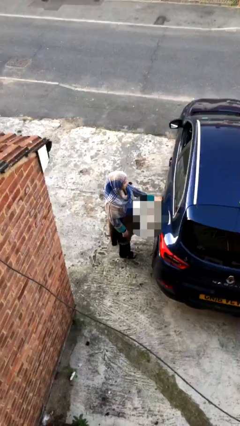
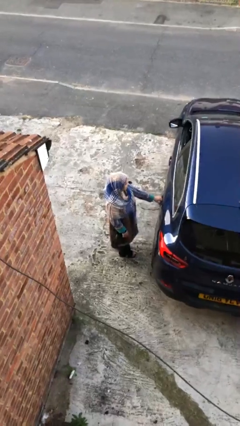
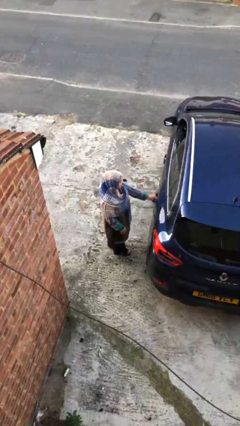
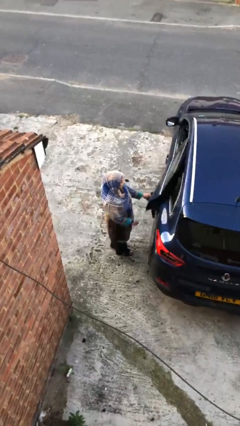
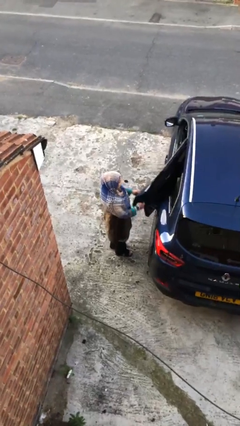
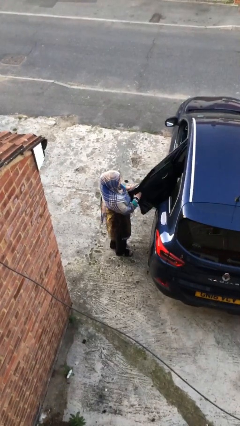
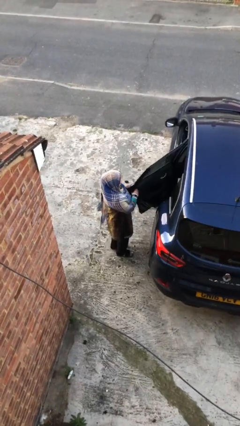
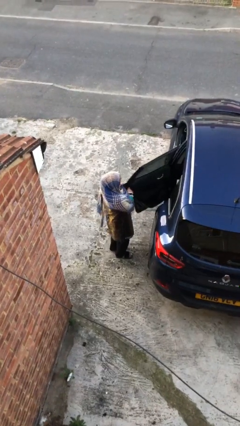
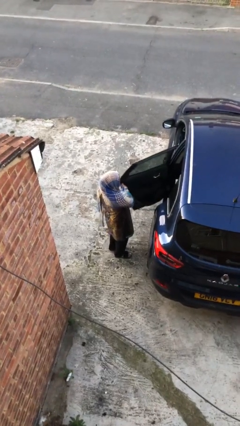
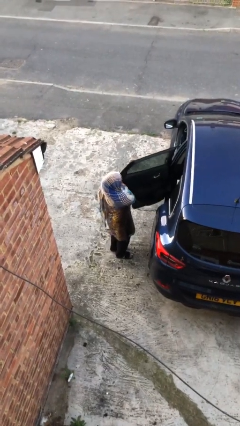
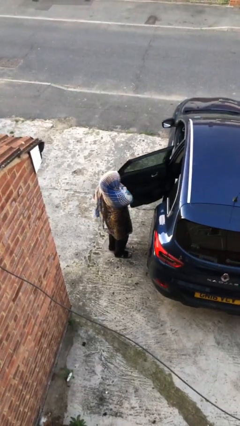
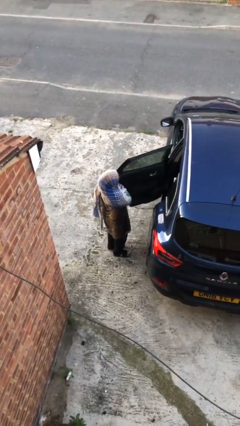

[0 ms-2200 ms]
person opens car door

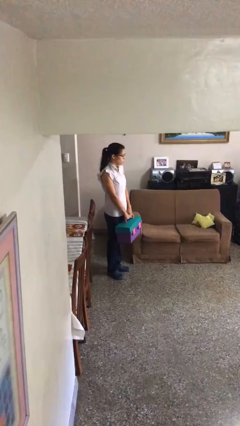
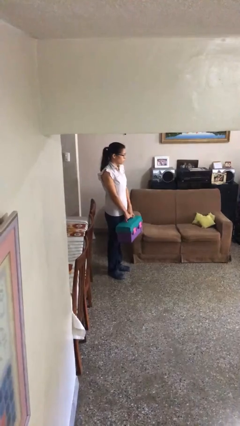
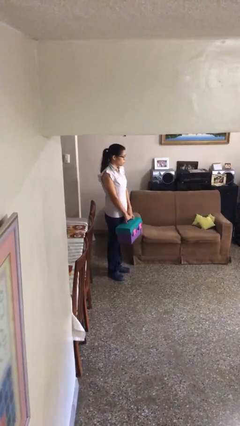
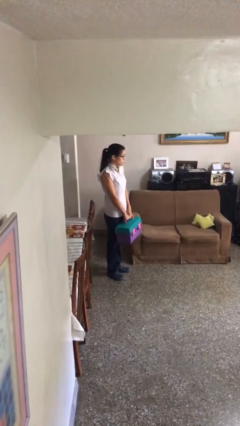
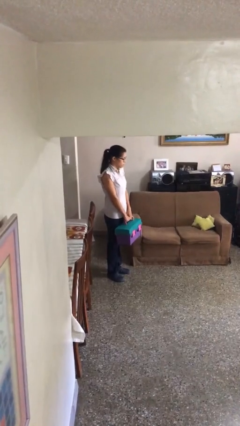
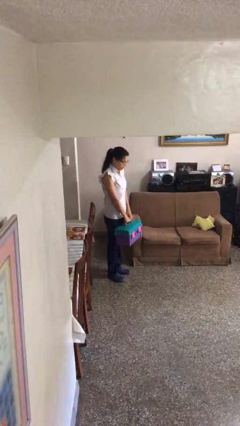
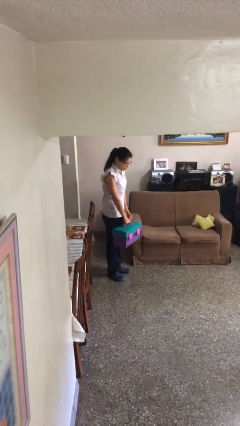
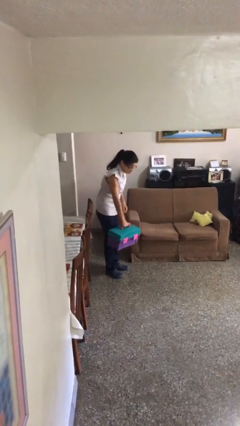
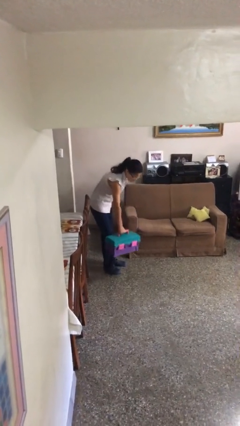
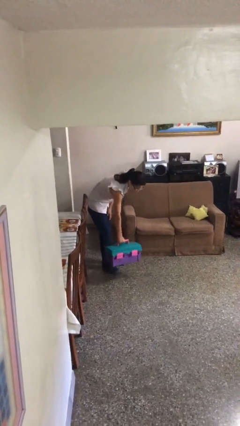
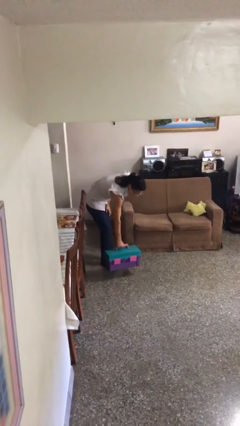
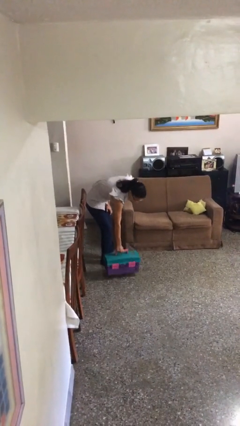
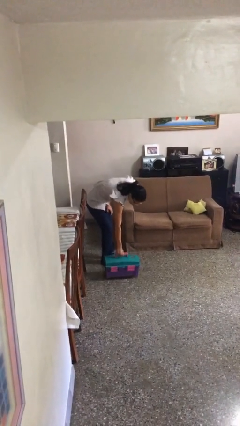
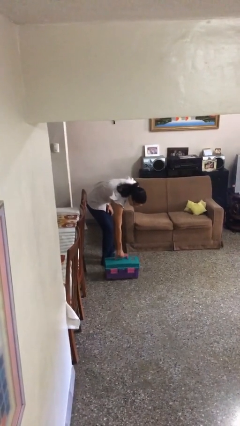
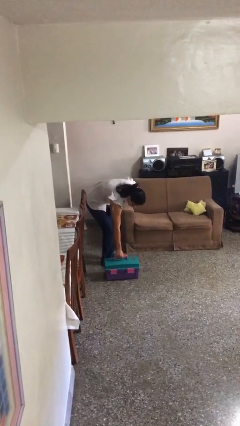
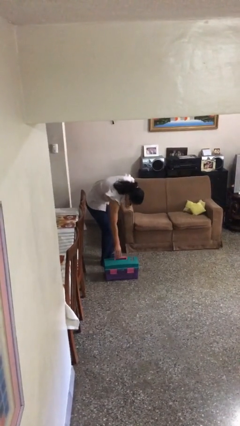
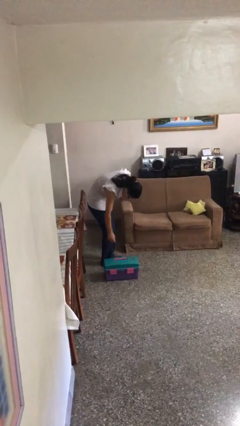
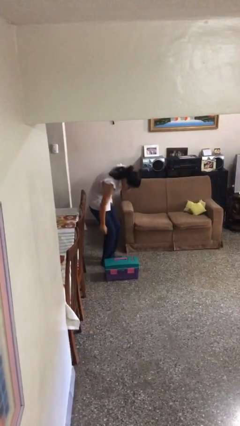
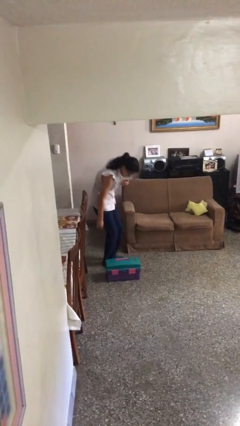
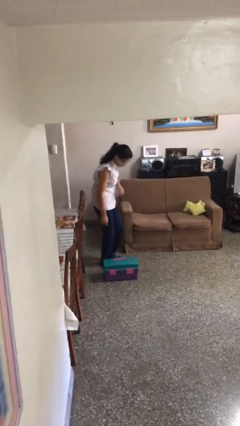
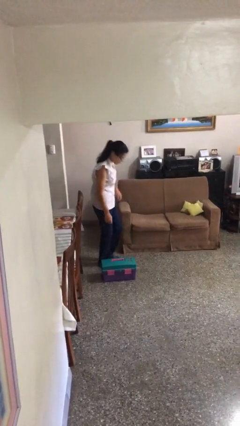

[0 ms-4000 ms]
person puts down object on floor

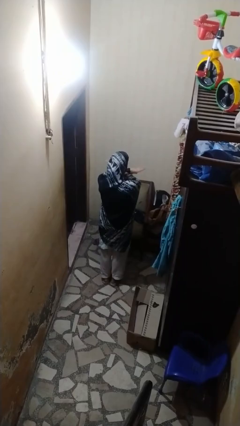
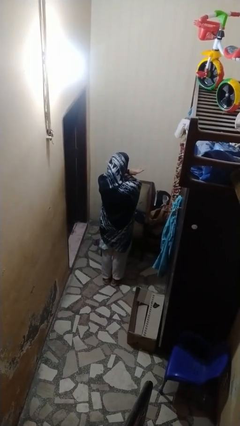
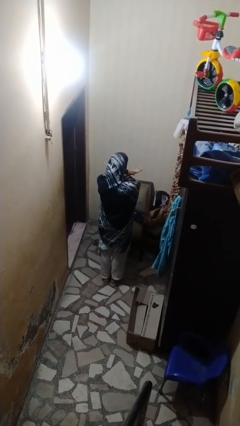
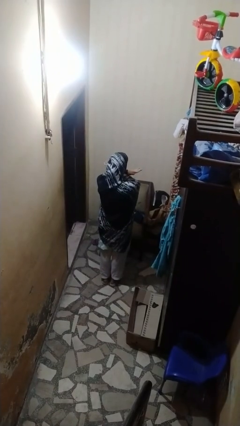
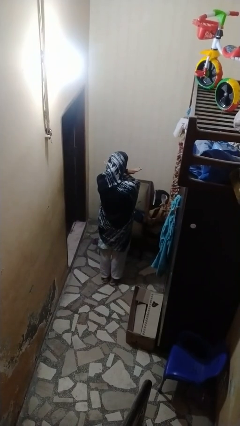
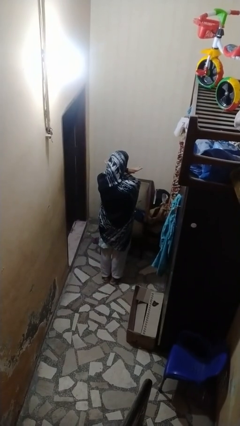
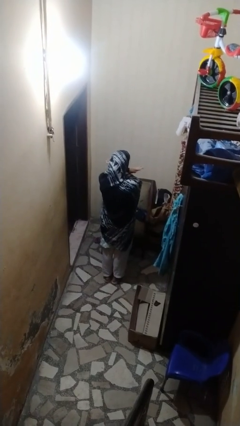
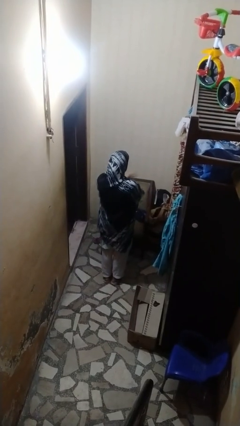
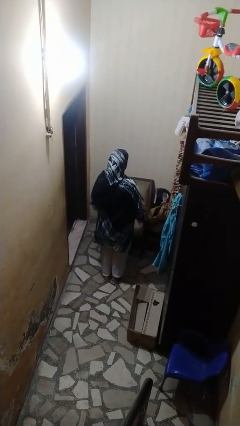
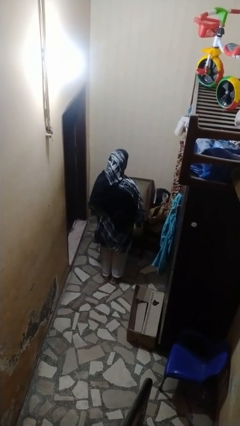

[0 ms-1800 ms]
person gestures arms x

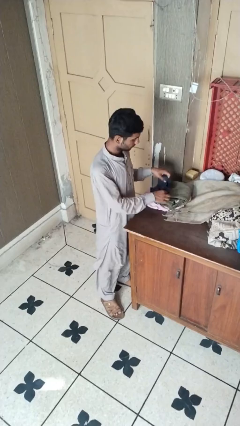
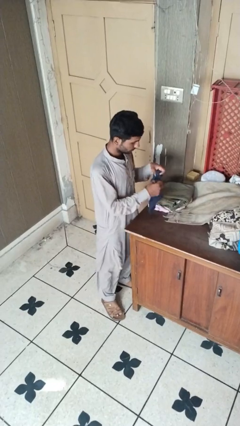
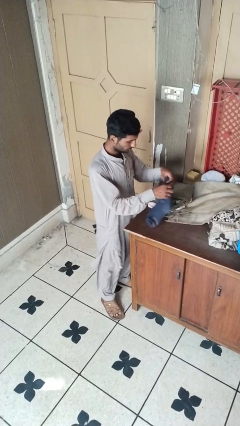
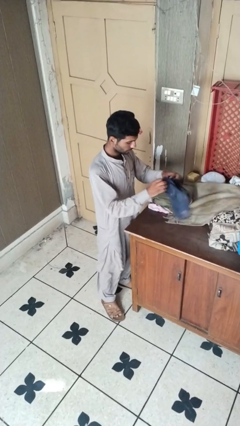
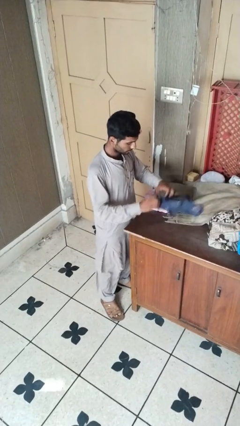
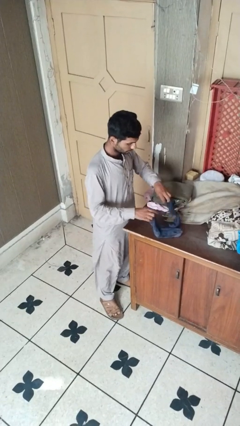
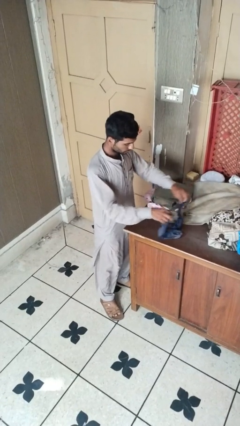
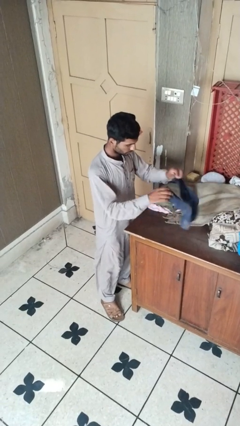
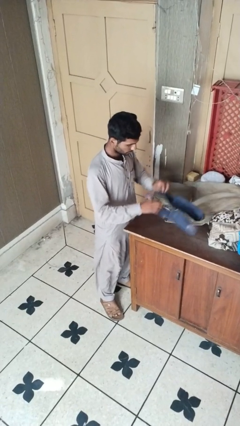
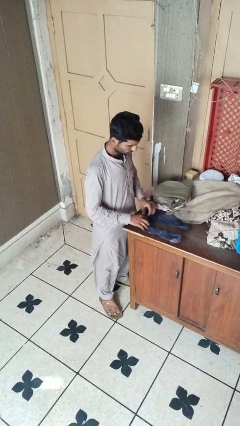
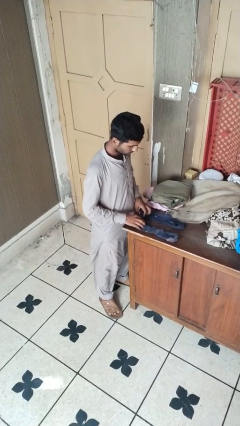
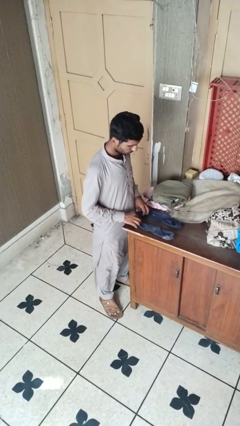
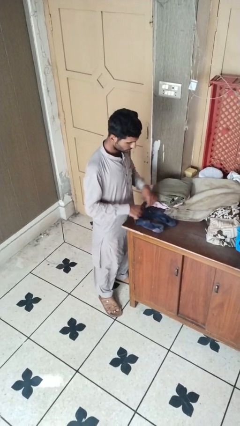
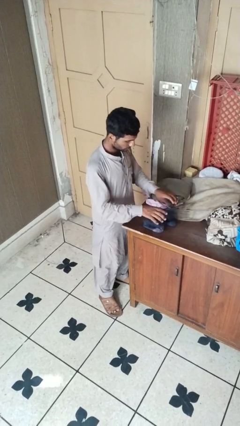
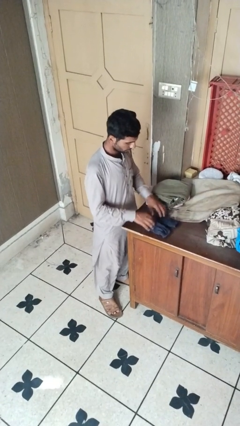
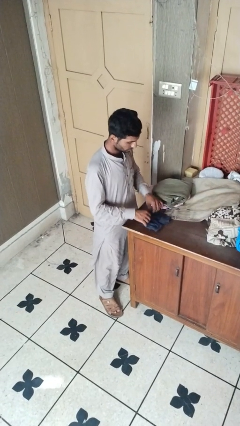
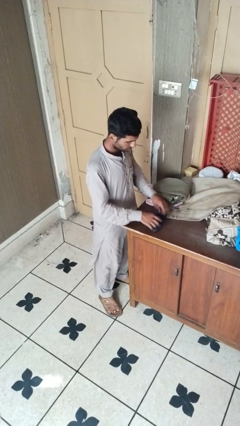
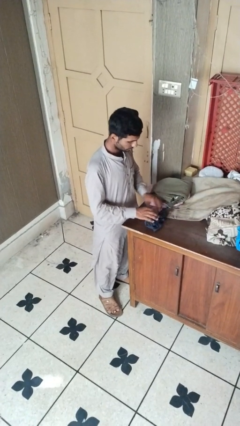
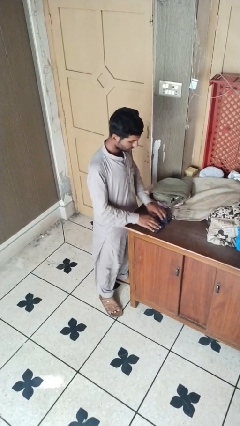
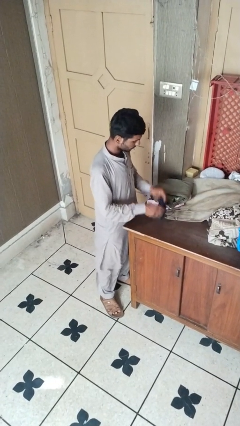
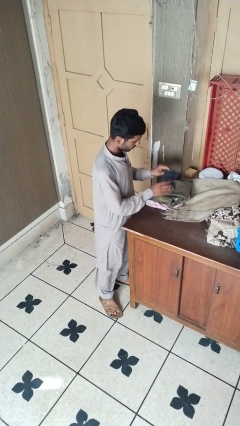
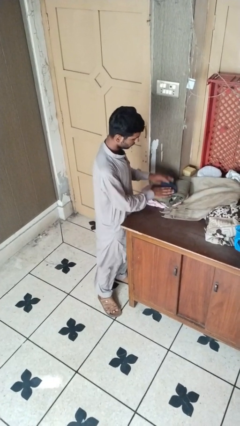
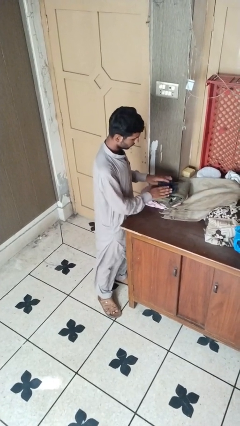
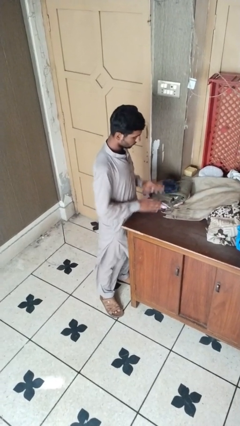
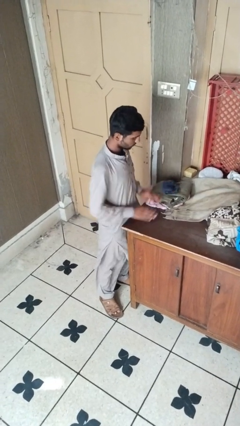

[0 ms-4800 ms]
person folds socks

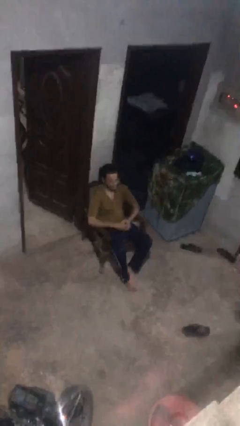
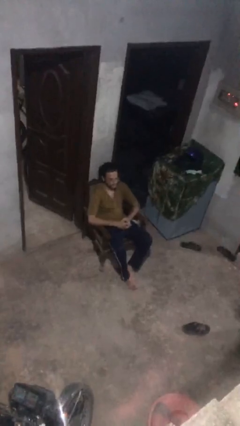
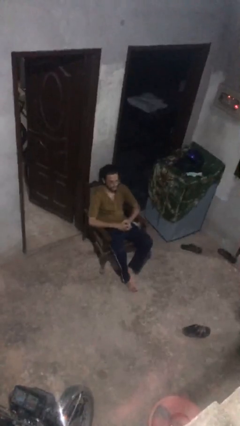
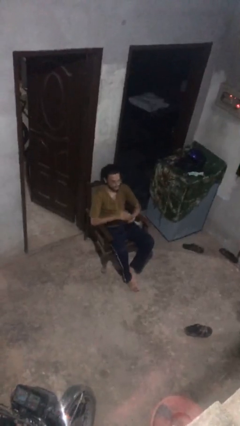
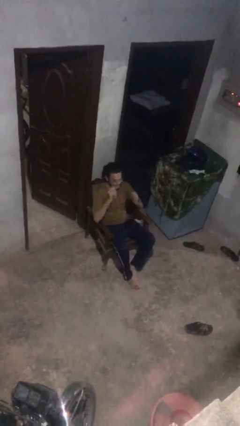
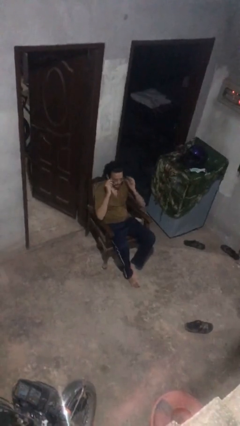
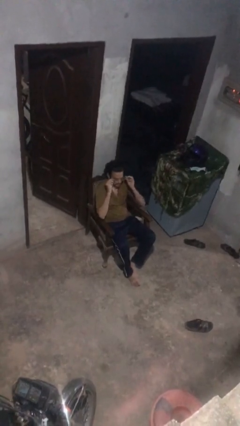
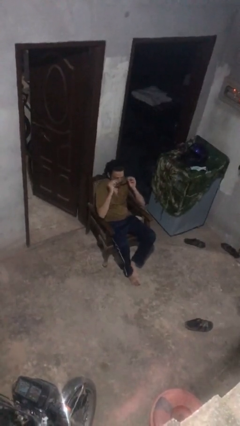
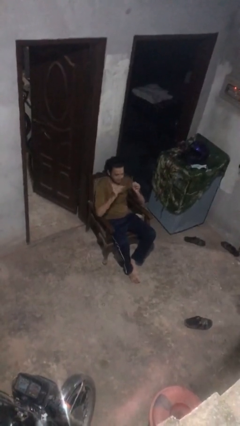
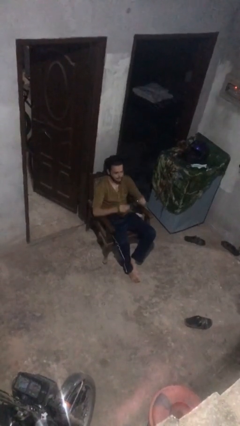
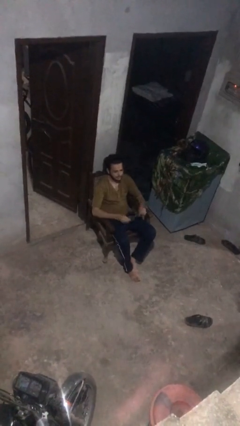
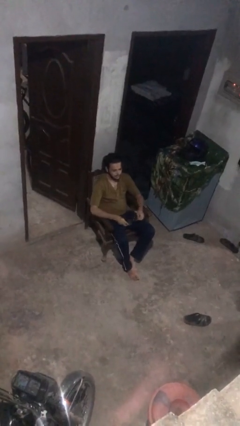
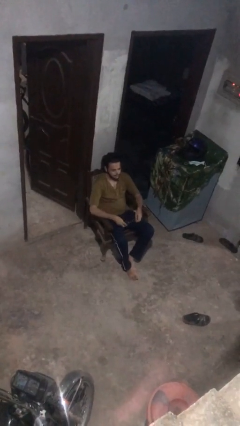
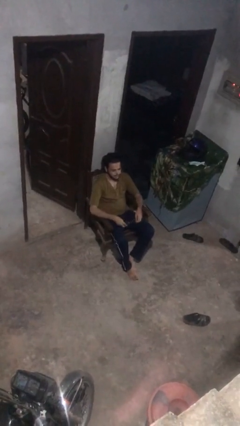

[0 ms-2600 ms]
person takes off glasses

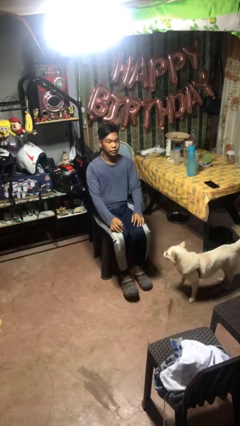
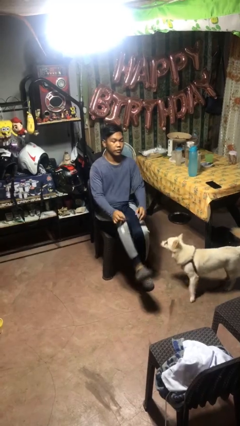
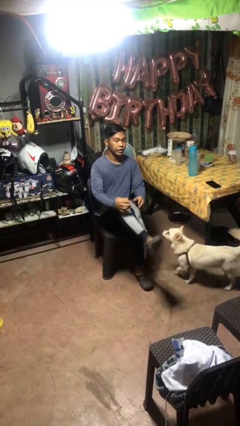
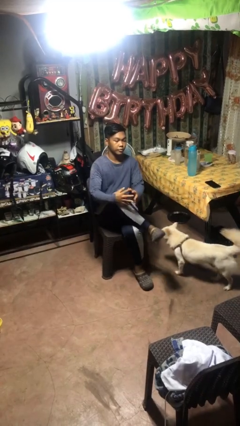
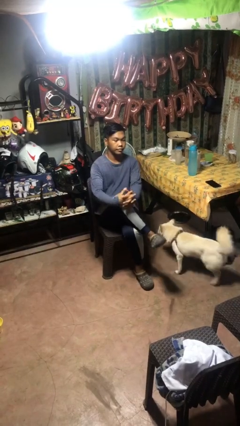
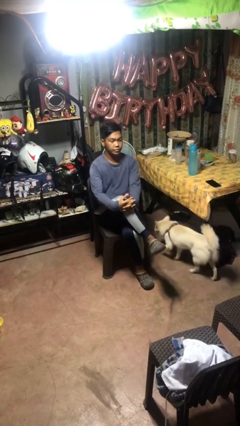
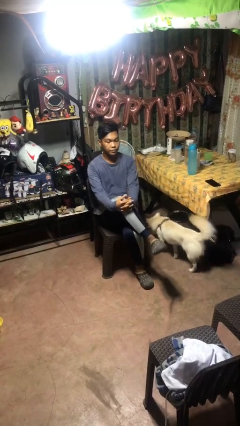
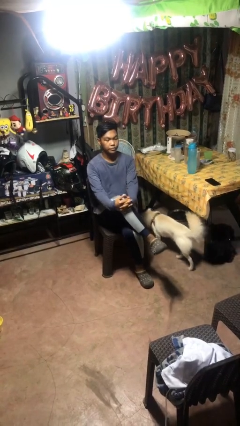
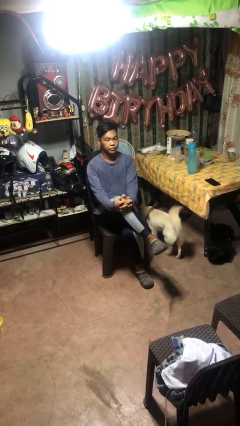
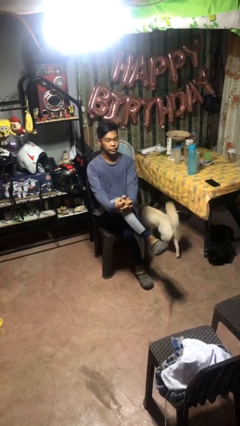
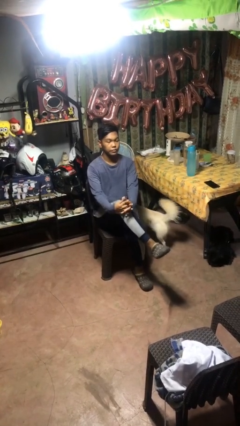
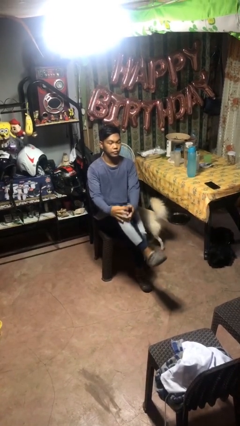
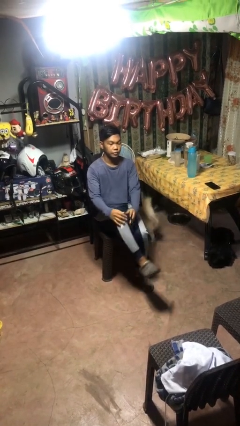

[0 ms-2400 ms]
person crosses legs
